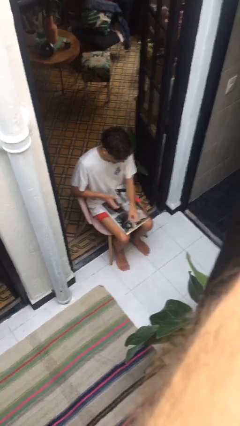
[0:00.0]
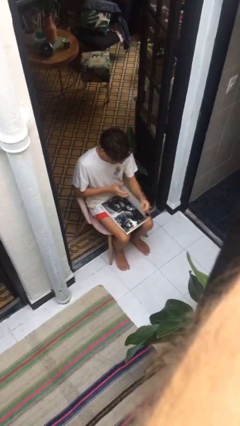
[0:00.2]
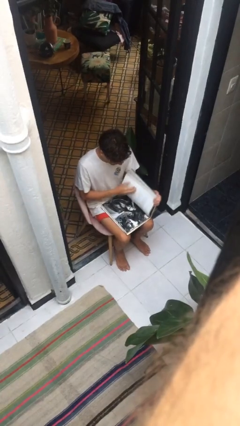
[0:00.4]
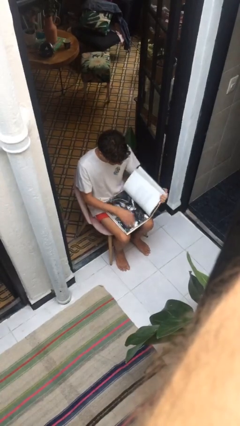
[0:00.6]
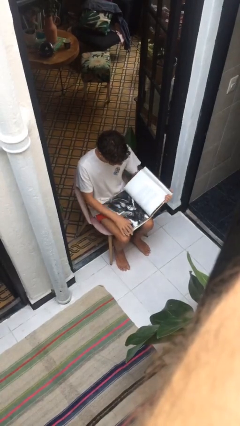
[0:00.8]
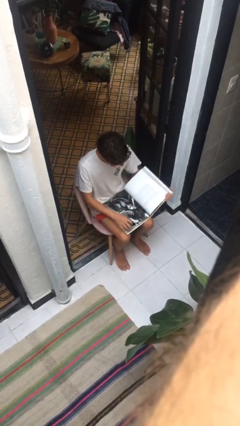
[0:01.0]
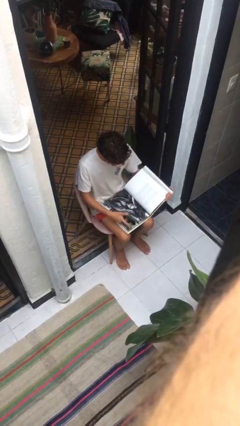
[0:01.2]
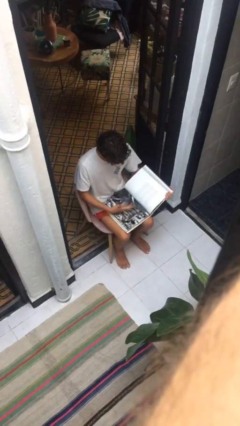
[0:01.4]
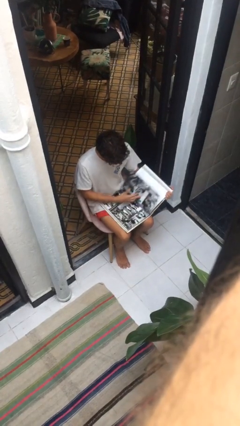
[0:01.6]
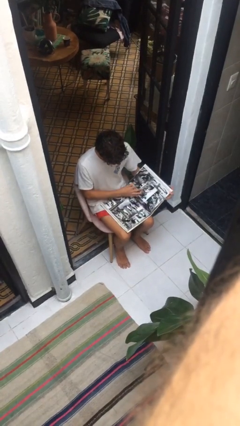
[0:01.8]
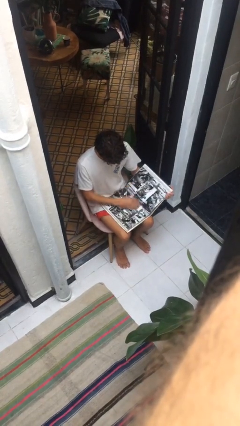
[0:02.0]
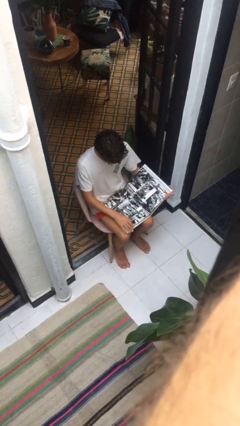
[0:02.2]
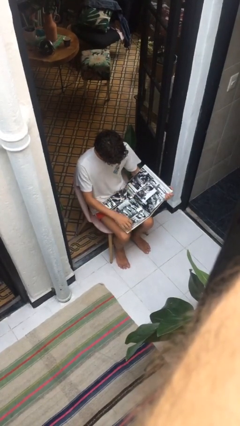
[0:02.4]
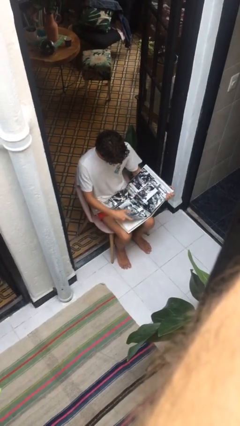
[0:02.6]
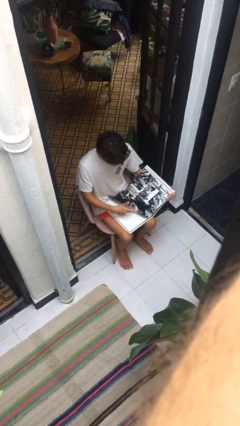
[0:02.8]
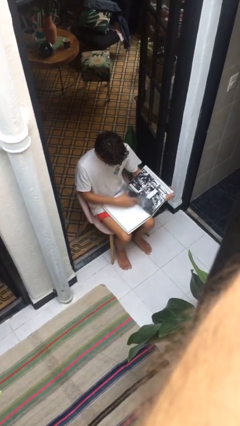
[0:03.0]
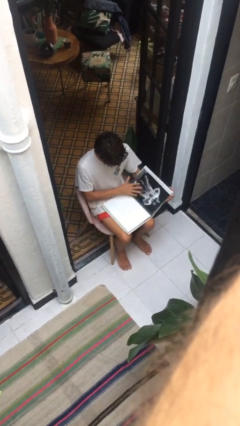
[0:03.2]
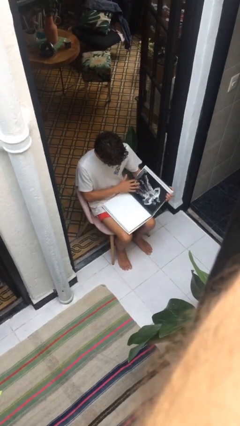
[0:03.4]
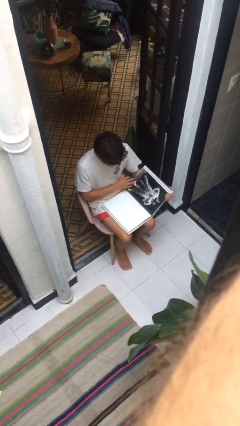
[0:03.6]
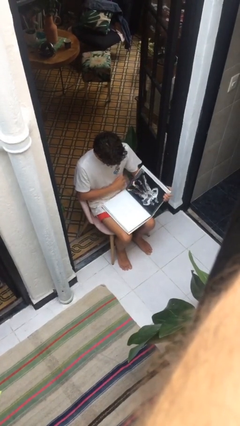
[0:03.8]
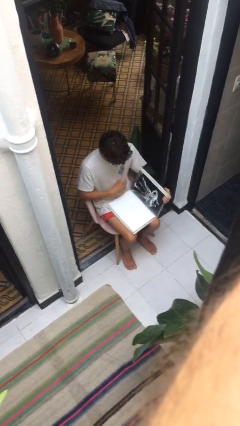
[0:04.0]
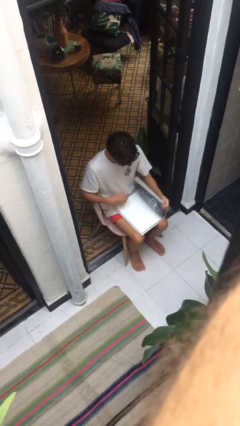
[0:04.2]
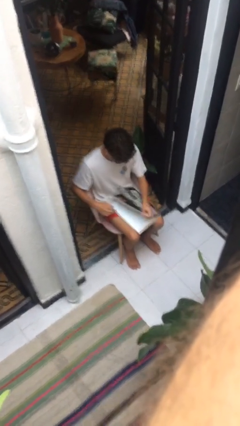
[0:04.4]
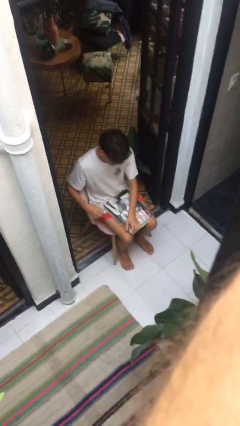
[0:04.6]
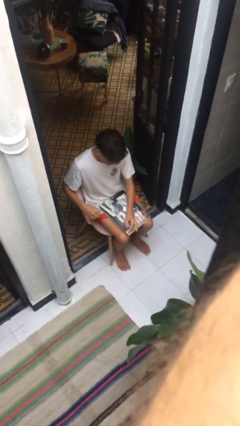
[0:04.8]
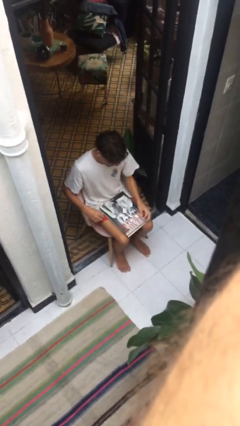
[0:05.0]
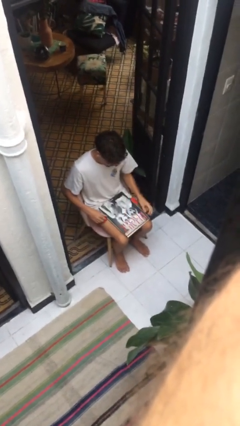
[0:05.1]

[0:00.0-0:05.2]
person reads document

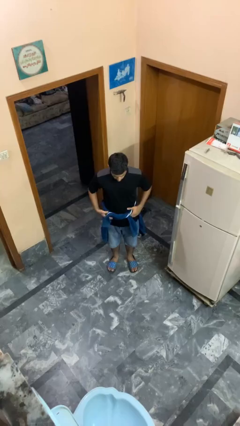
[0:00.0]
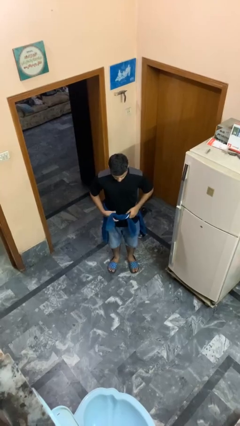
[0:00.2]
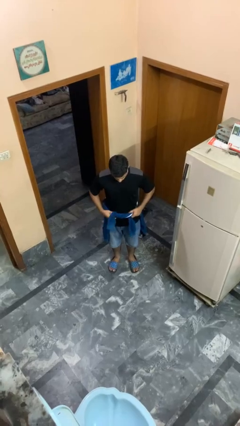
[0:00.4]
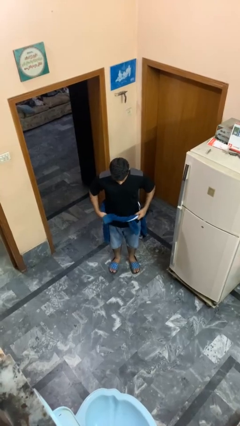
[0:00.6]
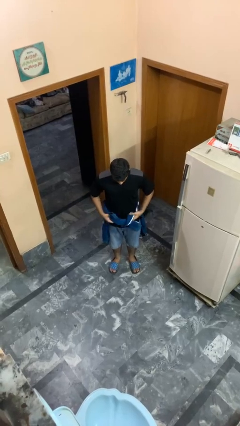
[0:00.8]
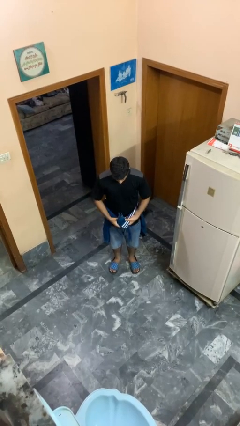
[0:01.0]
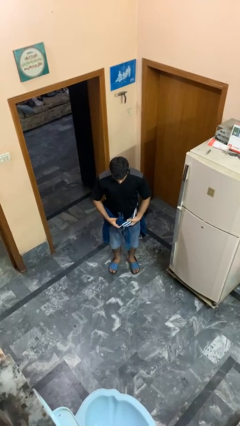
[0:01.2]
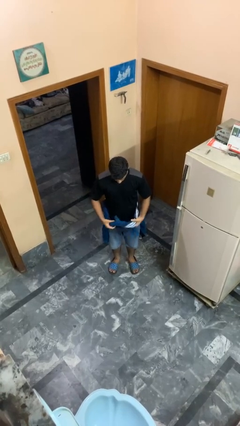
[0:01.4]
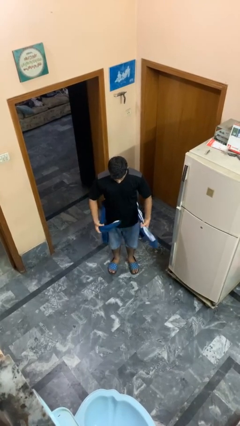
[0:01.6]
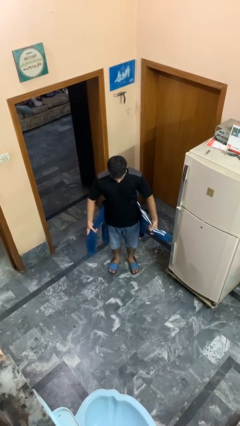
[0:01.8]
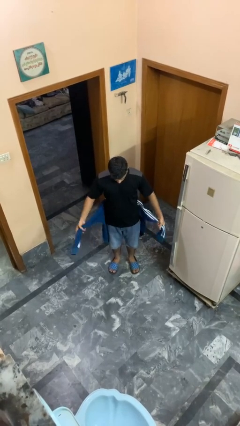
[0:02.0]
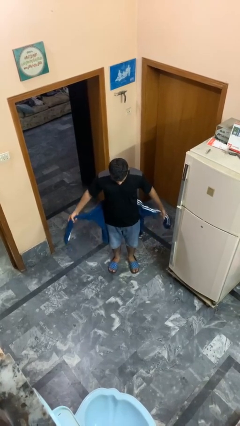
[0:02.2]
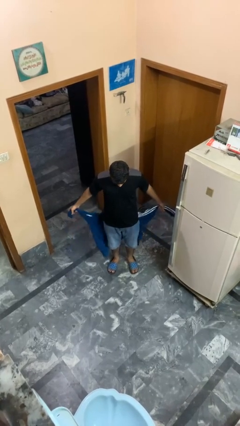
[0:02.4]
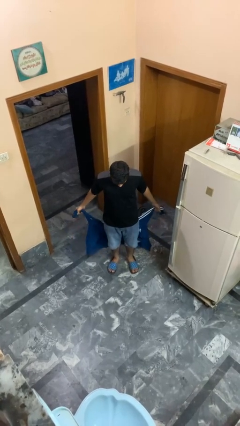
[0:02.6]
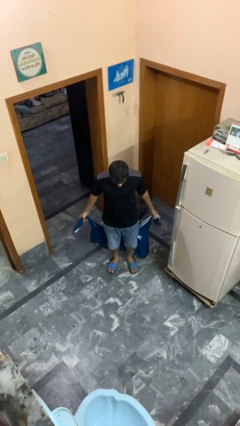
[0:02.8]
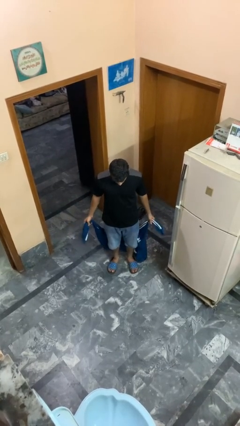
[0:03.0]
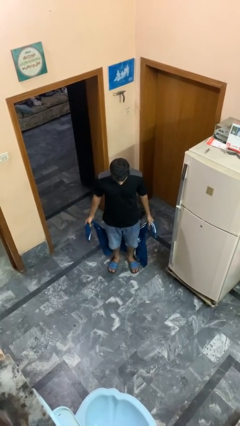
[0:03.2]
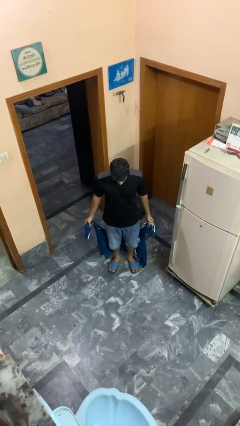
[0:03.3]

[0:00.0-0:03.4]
person unties jacket around waist

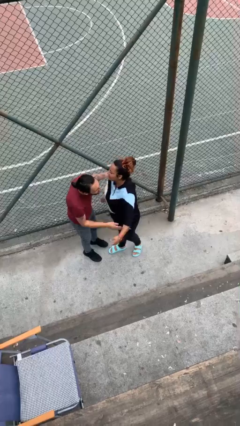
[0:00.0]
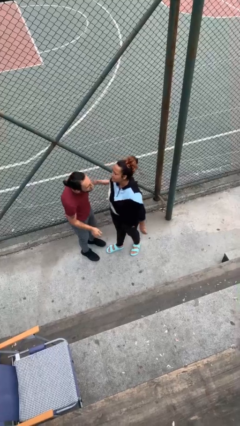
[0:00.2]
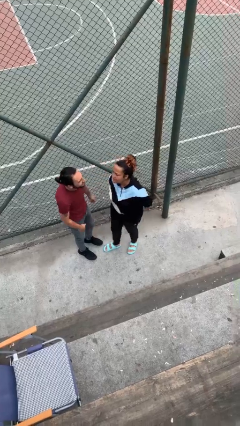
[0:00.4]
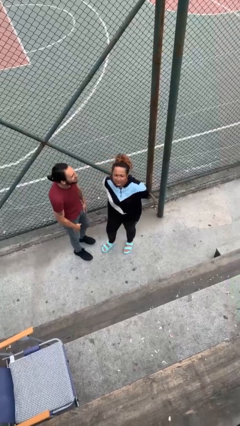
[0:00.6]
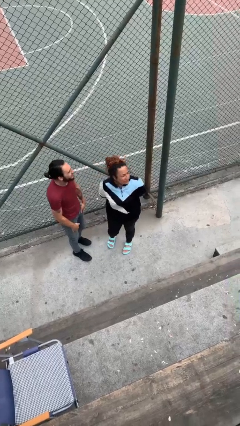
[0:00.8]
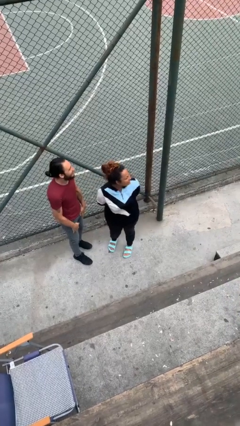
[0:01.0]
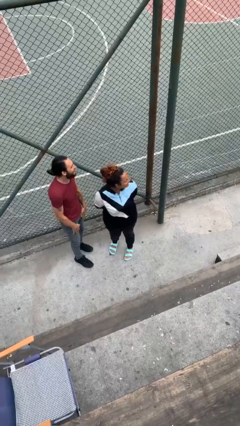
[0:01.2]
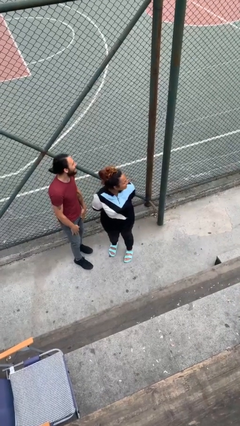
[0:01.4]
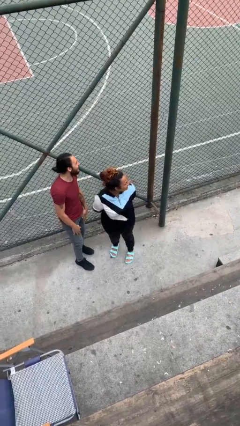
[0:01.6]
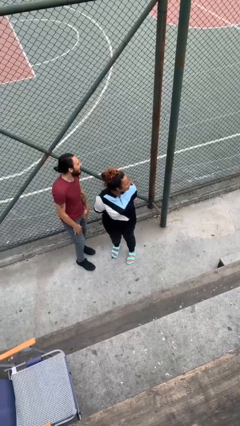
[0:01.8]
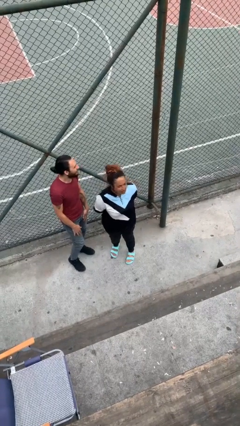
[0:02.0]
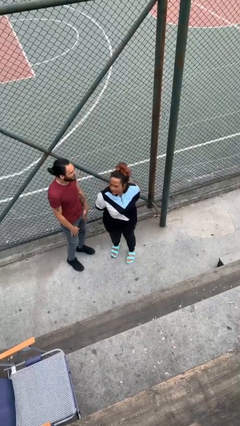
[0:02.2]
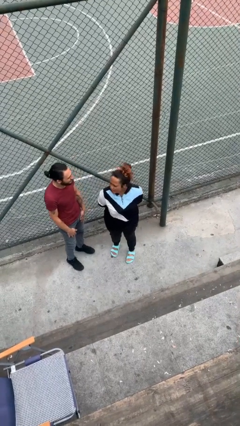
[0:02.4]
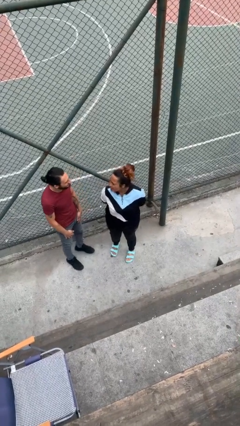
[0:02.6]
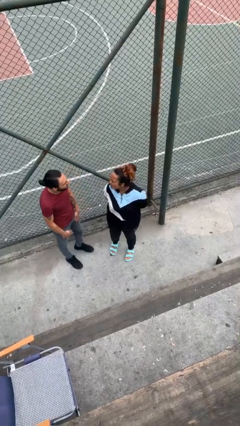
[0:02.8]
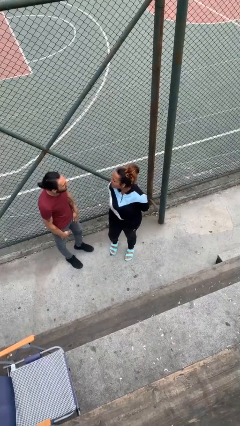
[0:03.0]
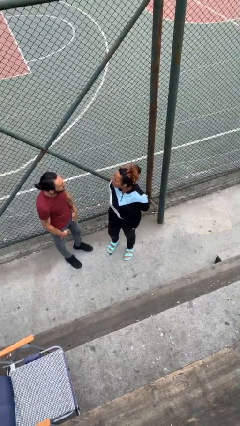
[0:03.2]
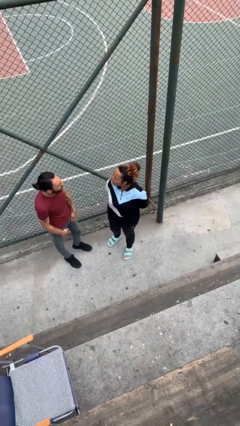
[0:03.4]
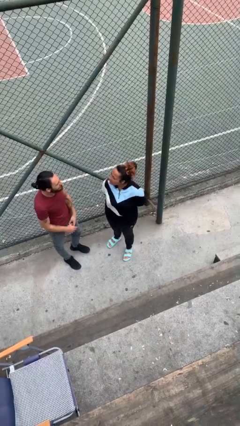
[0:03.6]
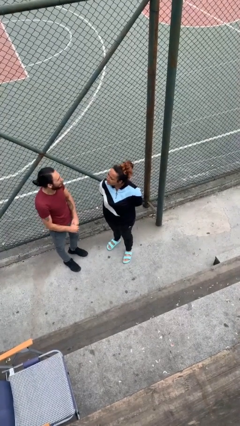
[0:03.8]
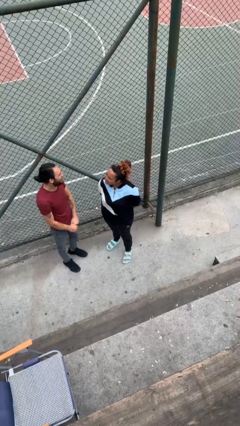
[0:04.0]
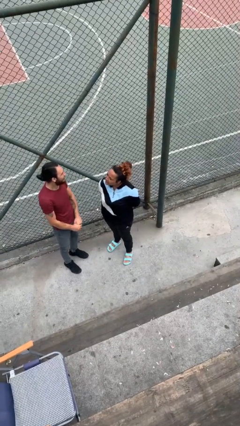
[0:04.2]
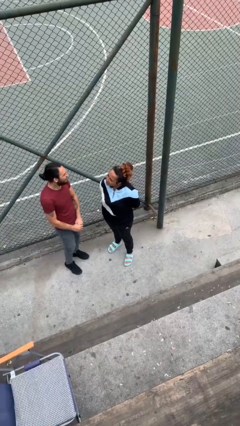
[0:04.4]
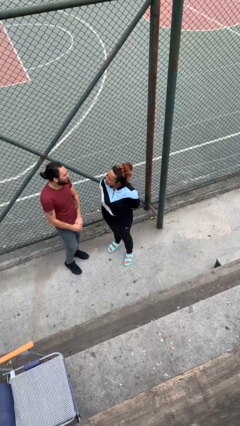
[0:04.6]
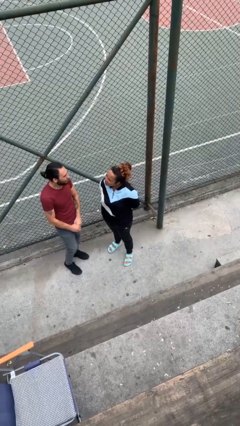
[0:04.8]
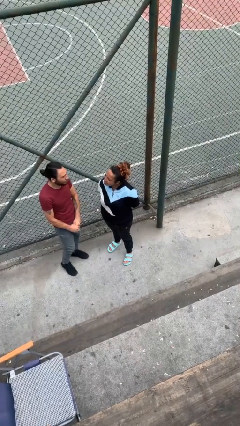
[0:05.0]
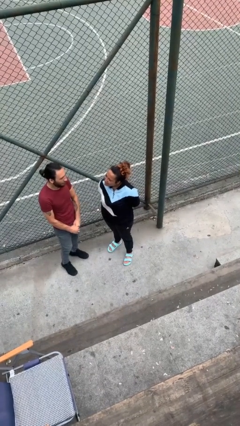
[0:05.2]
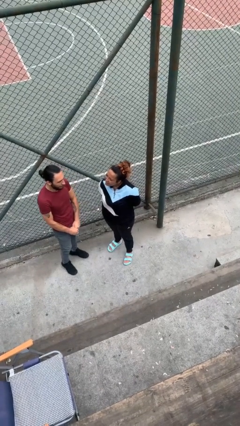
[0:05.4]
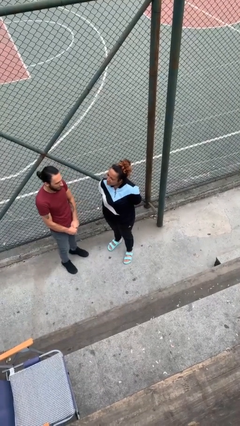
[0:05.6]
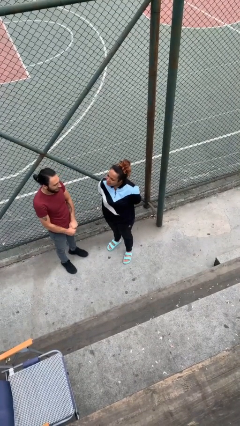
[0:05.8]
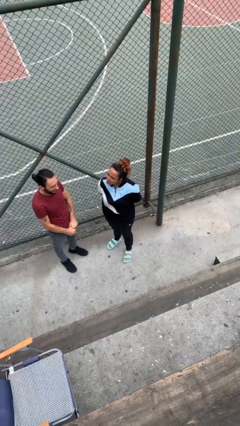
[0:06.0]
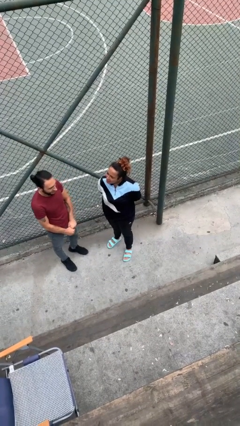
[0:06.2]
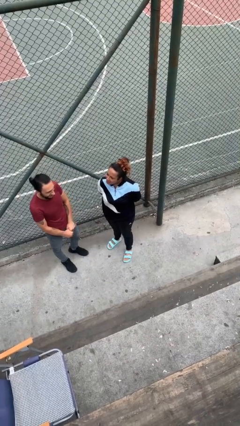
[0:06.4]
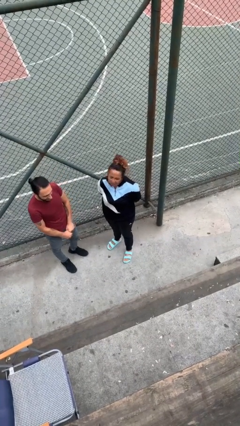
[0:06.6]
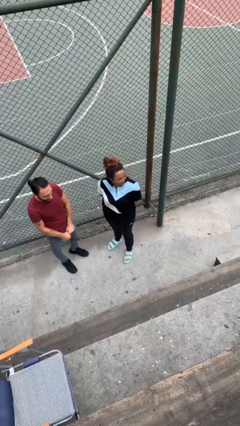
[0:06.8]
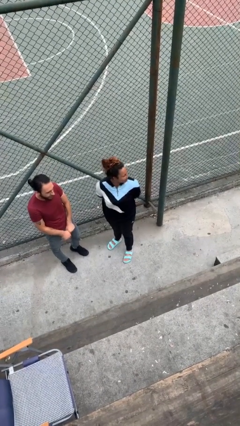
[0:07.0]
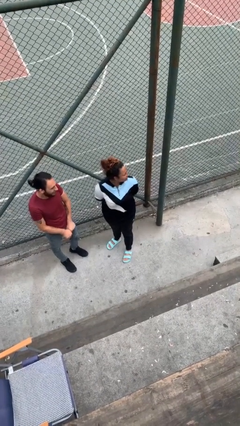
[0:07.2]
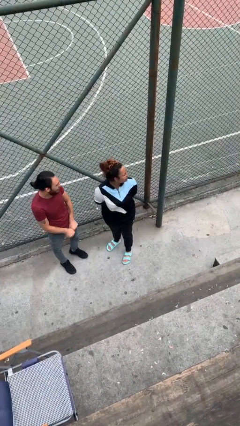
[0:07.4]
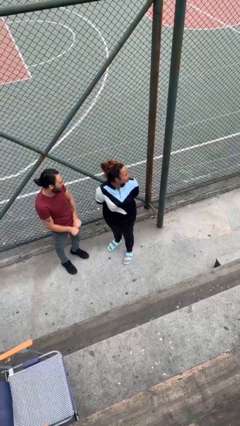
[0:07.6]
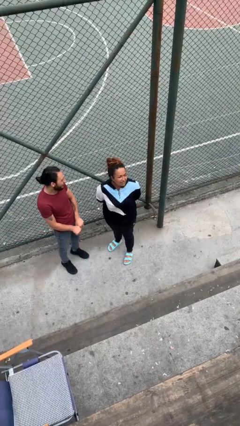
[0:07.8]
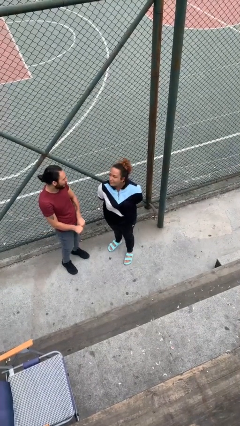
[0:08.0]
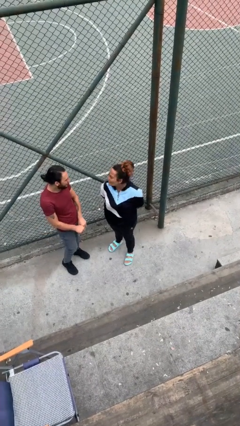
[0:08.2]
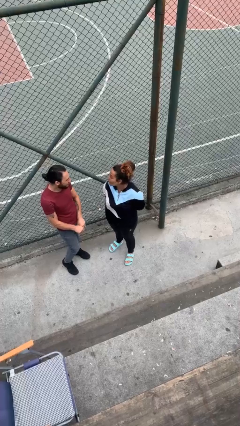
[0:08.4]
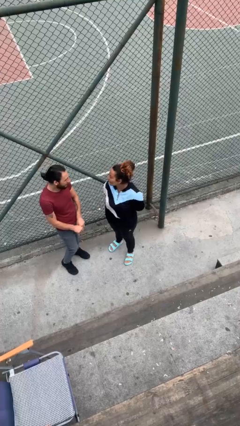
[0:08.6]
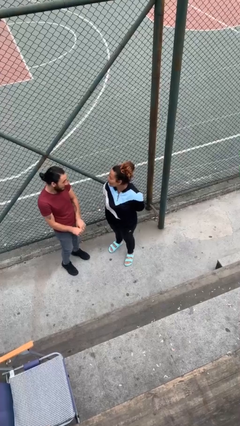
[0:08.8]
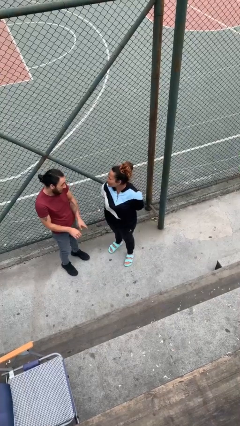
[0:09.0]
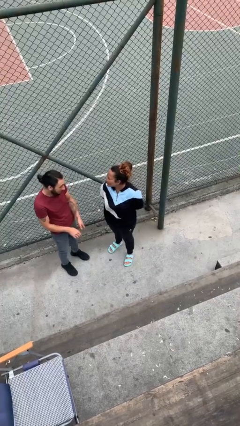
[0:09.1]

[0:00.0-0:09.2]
person talks to person
